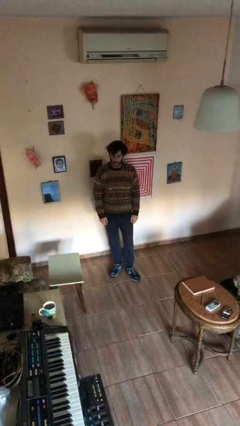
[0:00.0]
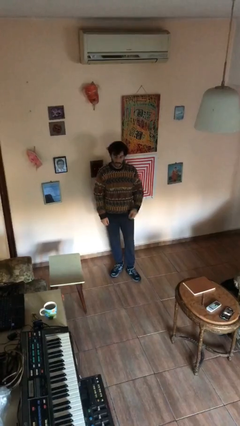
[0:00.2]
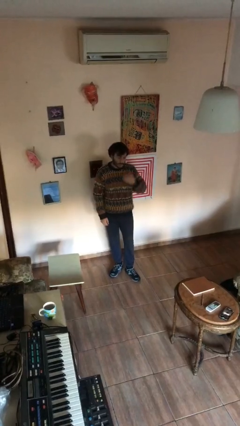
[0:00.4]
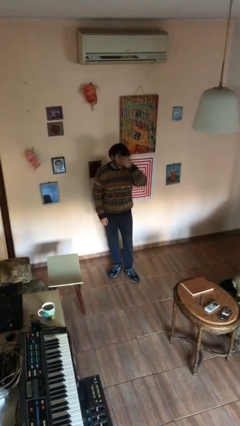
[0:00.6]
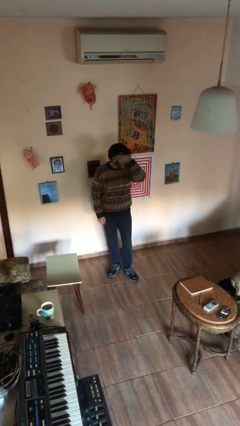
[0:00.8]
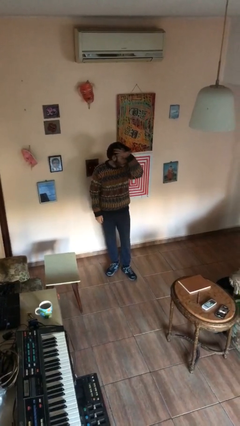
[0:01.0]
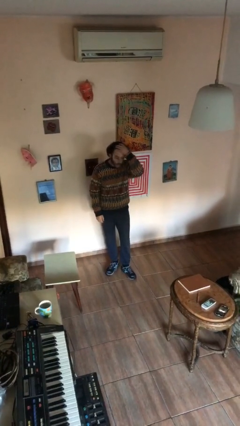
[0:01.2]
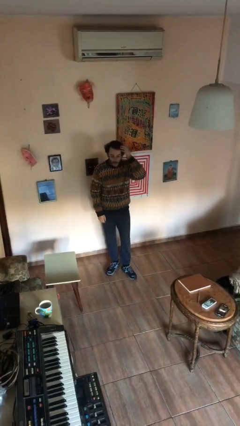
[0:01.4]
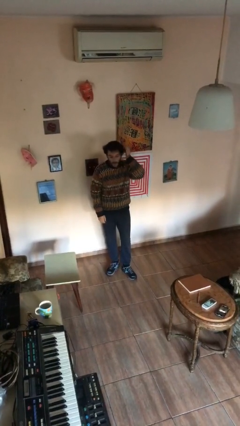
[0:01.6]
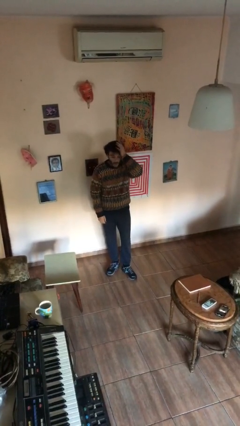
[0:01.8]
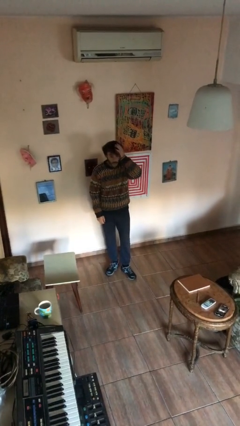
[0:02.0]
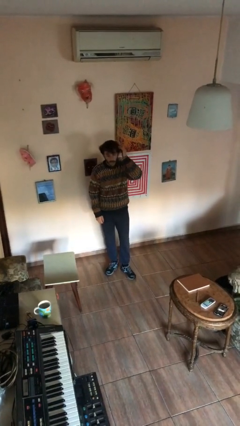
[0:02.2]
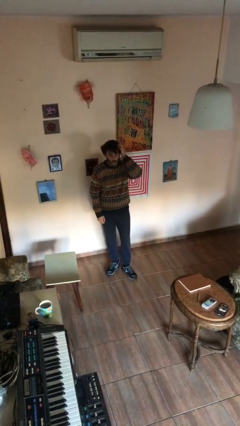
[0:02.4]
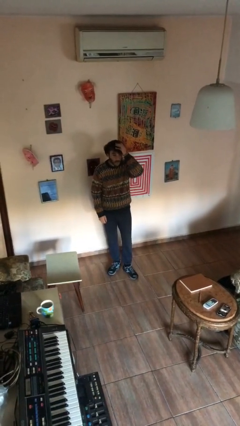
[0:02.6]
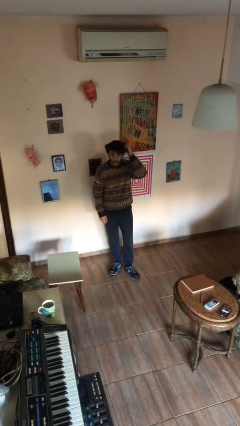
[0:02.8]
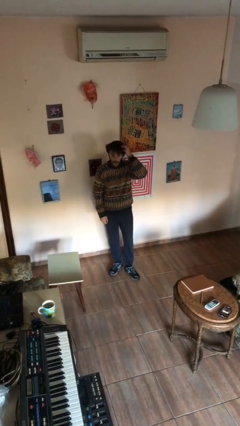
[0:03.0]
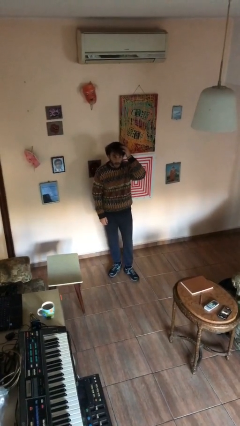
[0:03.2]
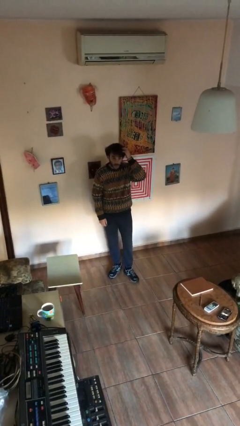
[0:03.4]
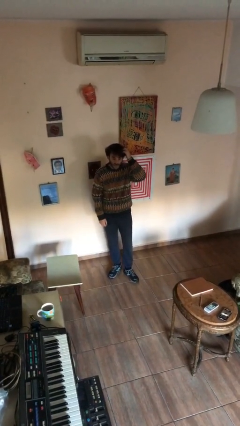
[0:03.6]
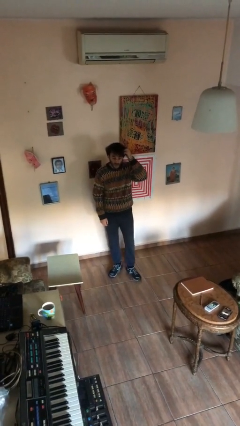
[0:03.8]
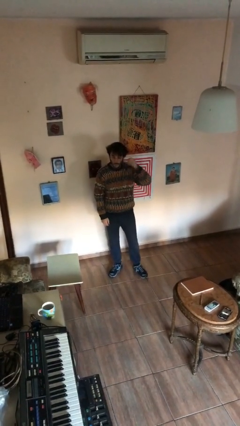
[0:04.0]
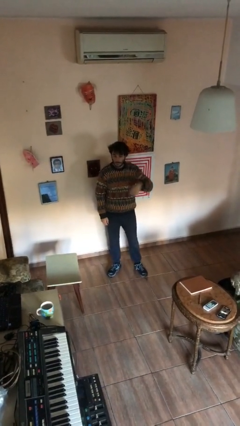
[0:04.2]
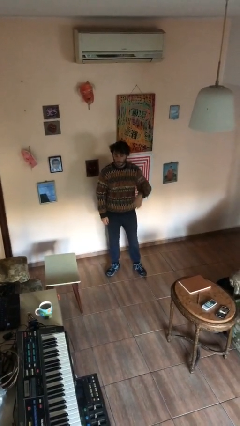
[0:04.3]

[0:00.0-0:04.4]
person scratches face

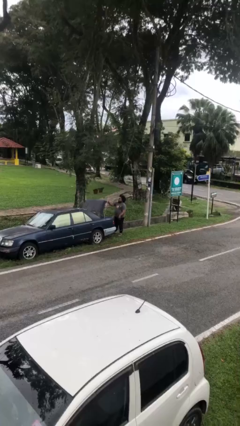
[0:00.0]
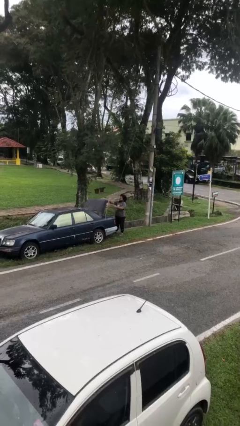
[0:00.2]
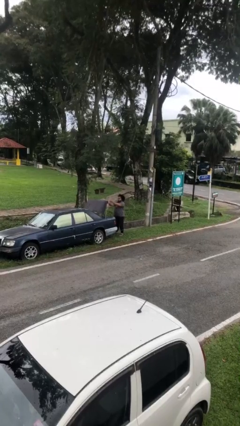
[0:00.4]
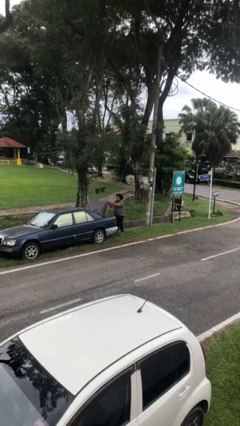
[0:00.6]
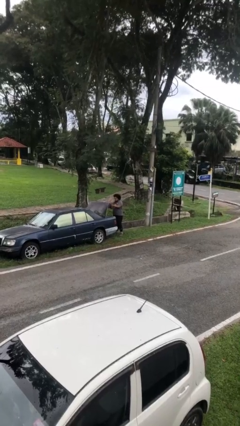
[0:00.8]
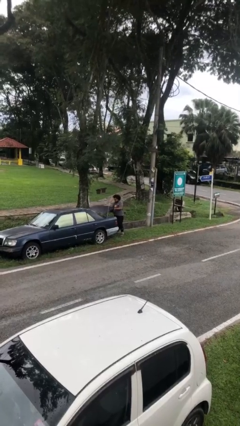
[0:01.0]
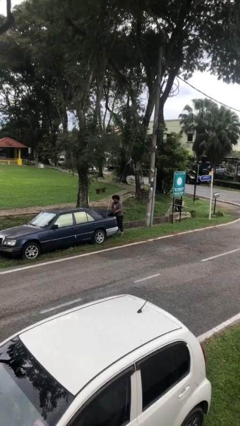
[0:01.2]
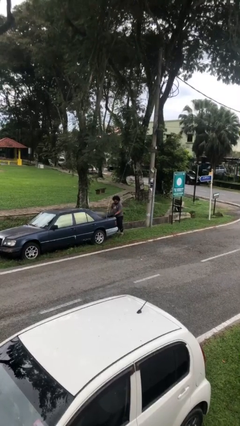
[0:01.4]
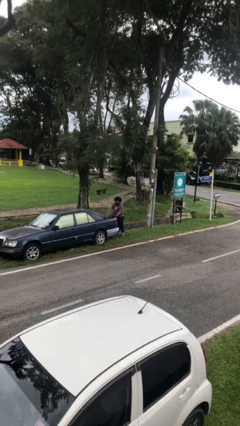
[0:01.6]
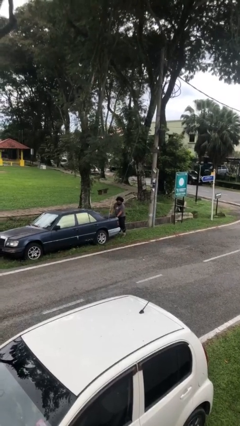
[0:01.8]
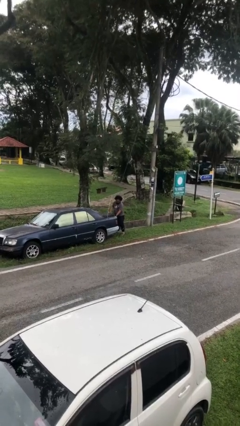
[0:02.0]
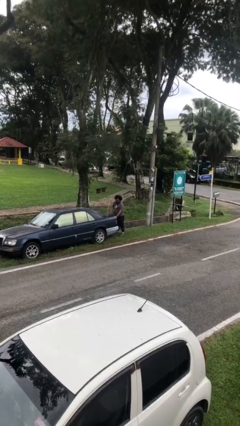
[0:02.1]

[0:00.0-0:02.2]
person closes car trunk

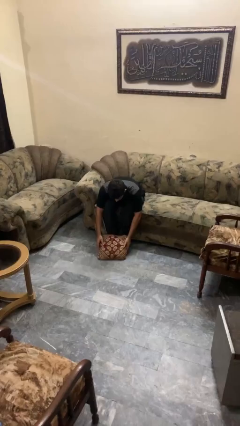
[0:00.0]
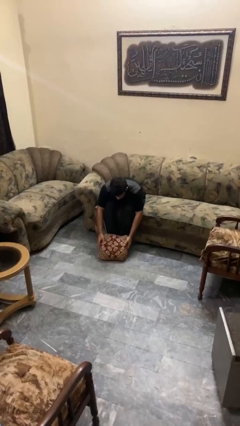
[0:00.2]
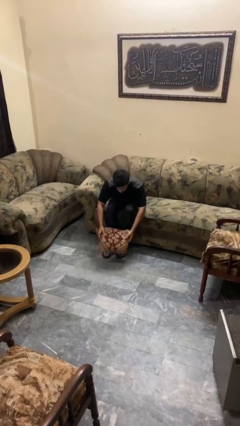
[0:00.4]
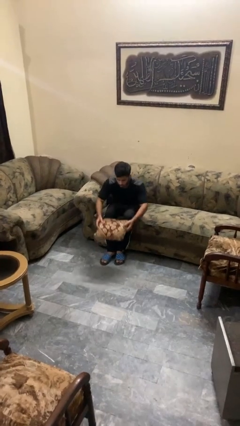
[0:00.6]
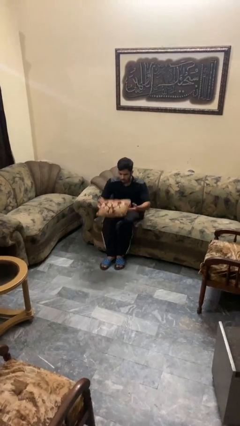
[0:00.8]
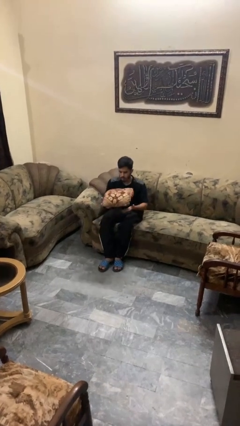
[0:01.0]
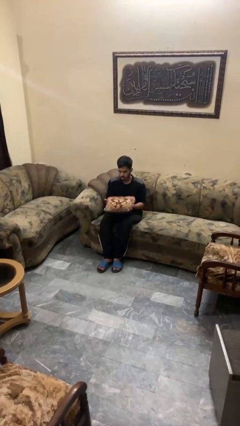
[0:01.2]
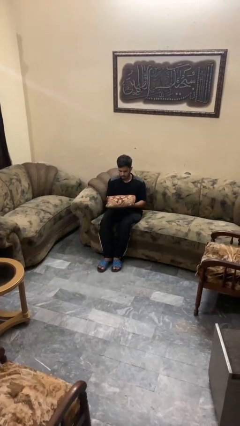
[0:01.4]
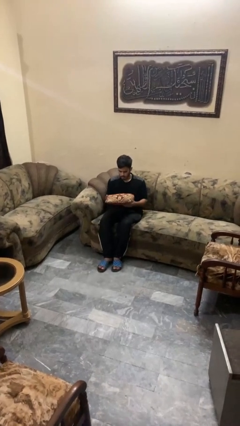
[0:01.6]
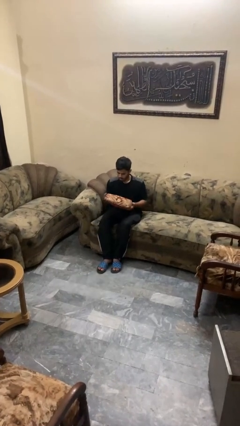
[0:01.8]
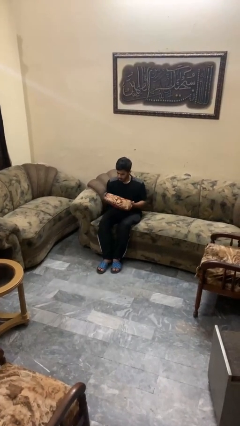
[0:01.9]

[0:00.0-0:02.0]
person picks up object from floor

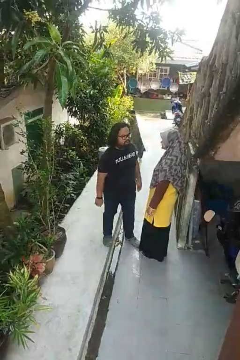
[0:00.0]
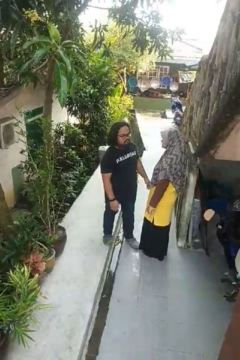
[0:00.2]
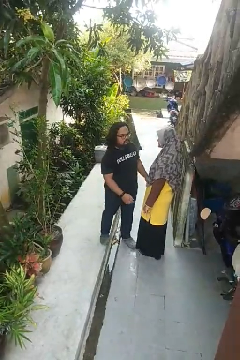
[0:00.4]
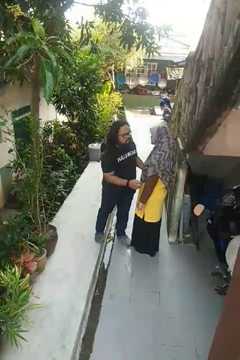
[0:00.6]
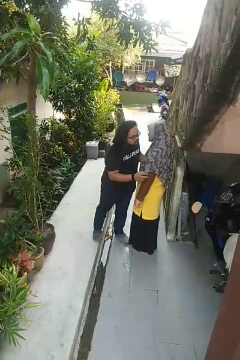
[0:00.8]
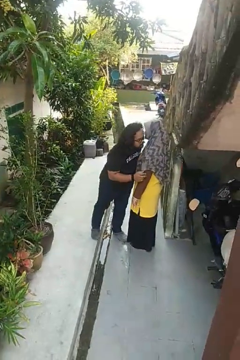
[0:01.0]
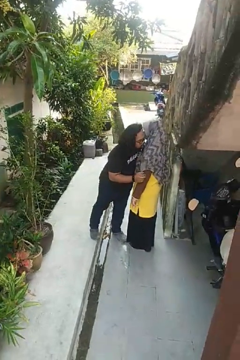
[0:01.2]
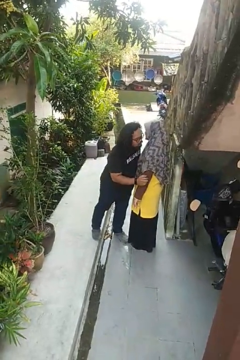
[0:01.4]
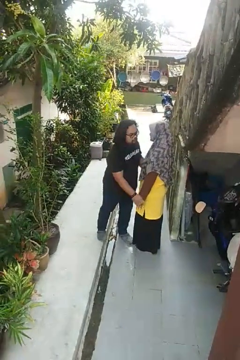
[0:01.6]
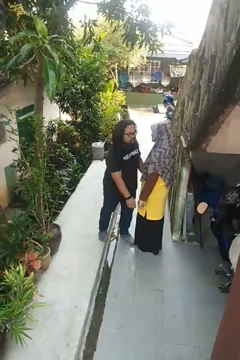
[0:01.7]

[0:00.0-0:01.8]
person kisses cheek of person

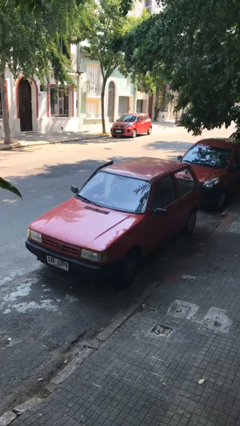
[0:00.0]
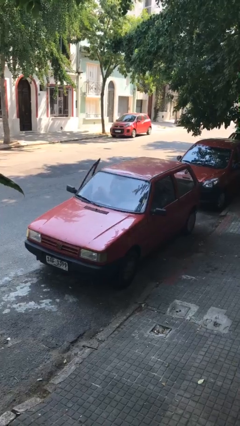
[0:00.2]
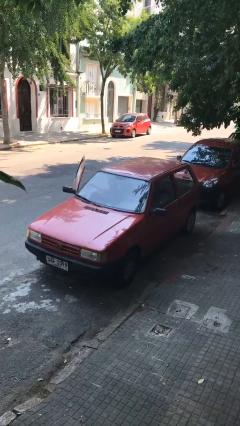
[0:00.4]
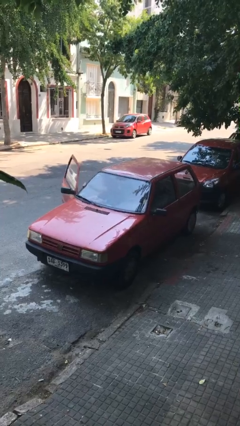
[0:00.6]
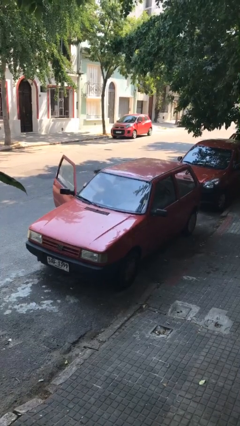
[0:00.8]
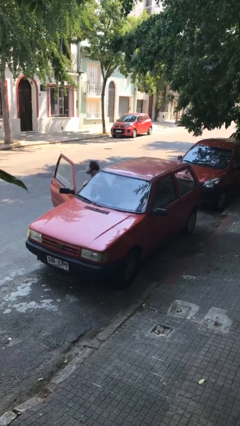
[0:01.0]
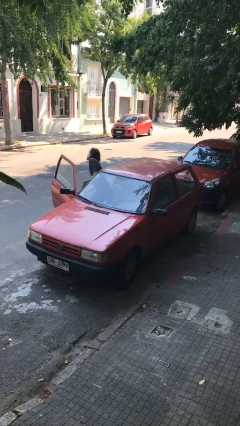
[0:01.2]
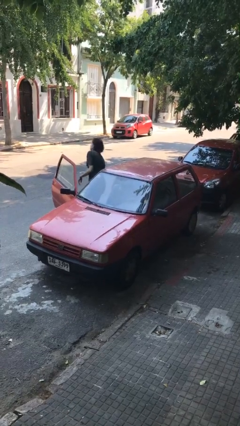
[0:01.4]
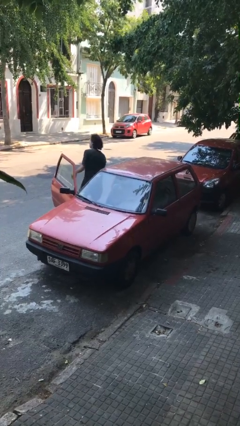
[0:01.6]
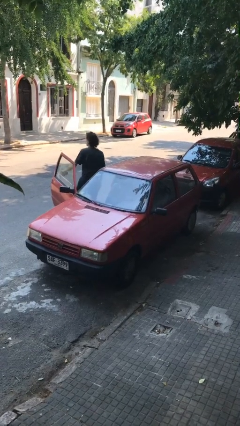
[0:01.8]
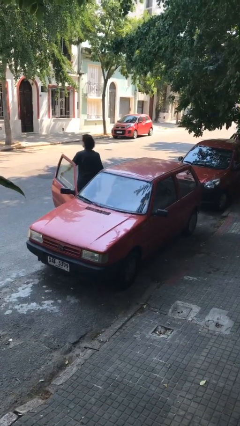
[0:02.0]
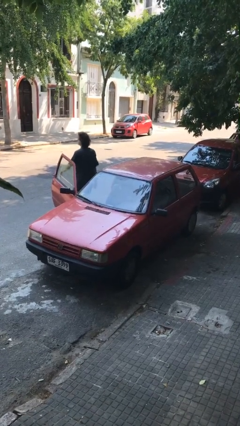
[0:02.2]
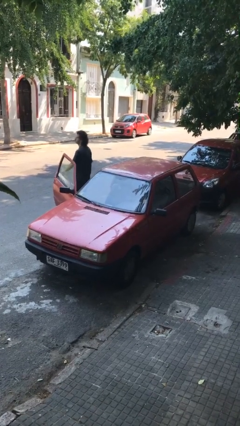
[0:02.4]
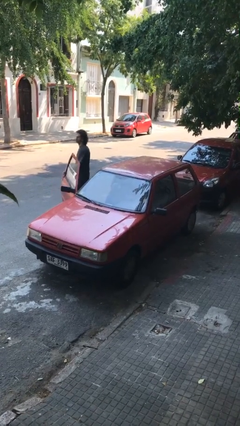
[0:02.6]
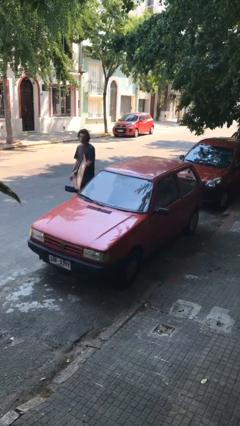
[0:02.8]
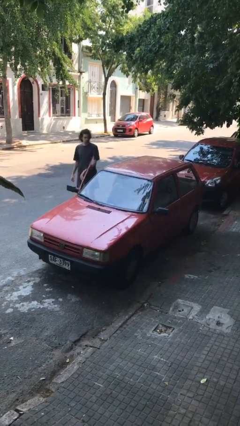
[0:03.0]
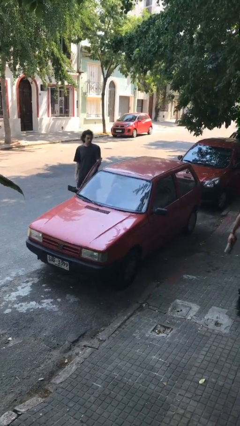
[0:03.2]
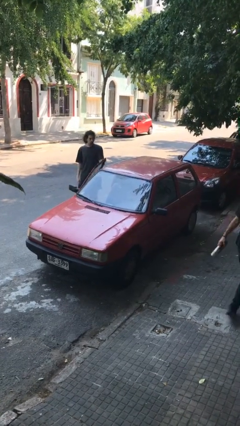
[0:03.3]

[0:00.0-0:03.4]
car drops off person

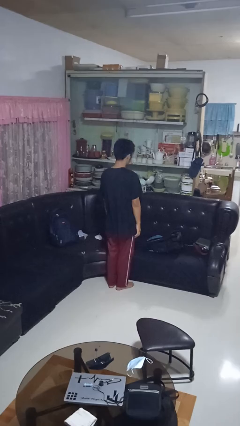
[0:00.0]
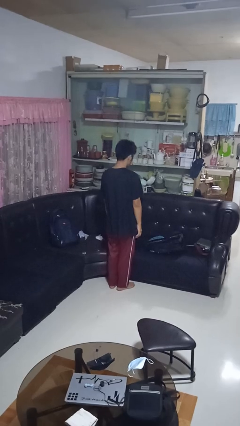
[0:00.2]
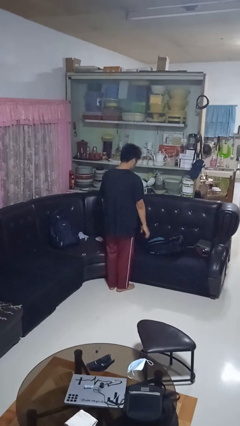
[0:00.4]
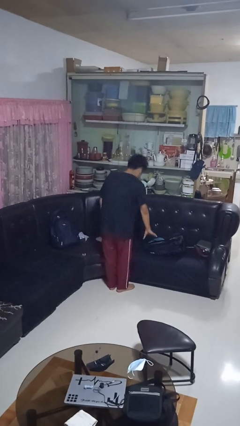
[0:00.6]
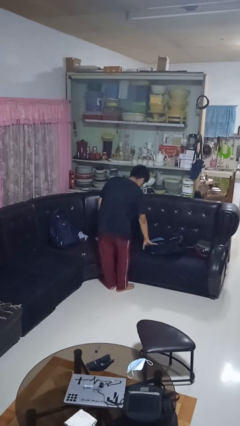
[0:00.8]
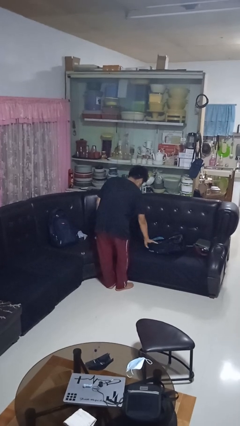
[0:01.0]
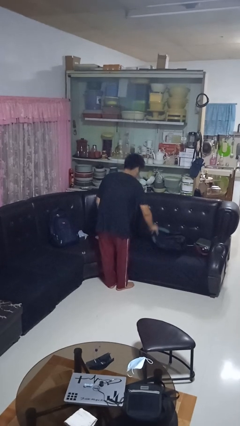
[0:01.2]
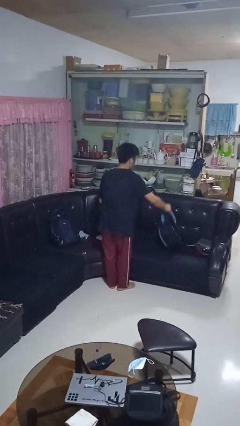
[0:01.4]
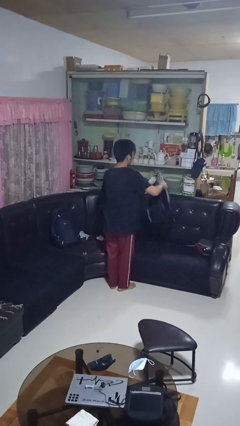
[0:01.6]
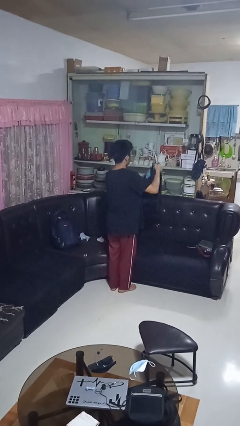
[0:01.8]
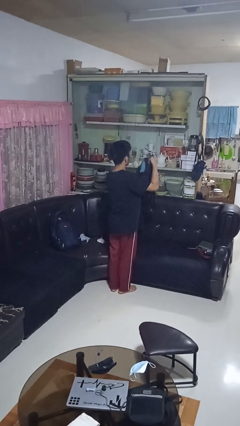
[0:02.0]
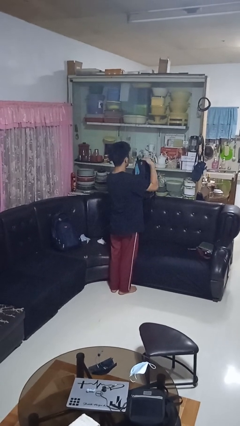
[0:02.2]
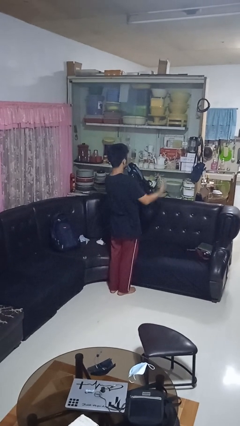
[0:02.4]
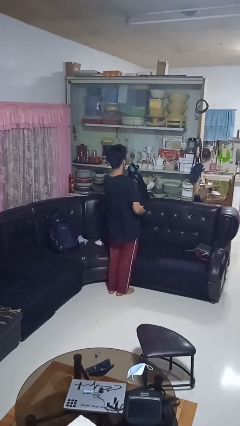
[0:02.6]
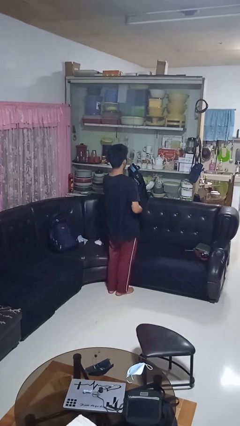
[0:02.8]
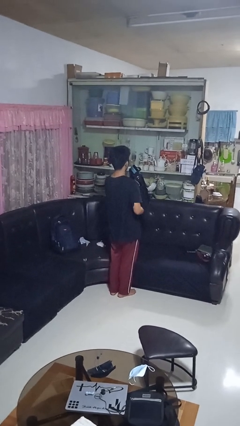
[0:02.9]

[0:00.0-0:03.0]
person picks up object from couch

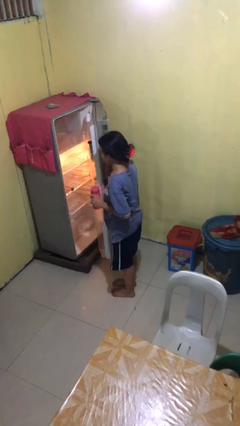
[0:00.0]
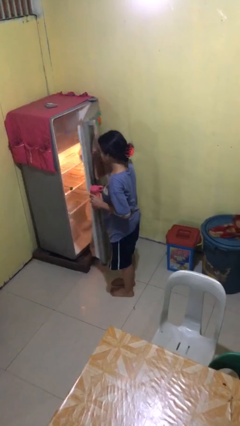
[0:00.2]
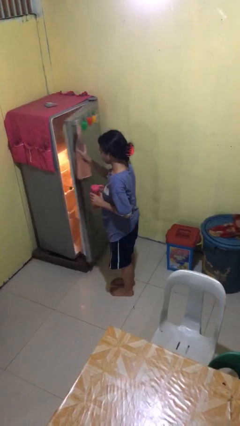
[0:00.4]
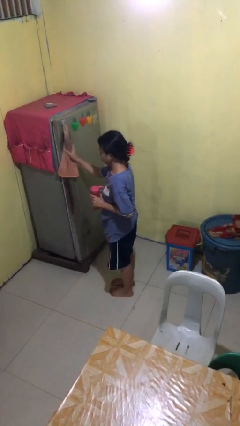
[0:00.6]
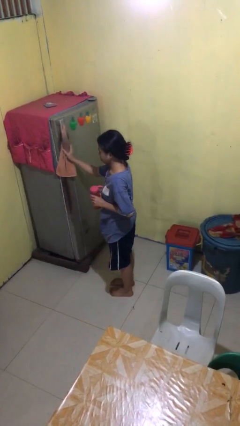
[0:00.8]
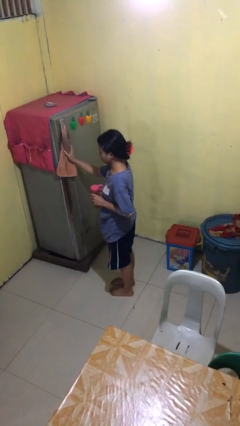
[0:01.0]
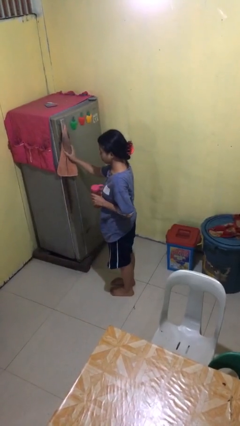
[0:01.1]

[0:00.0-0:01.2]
person closes refrigerator
